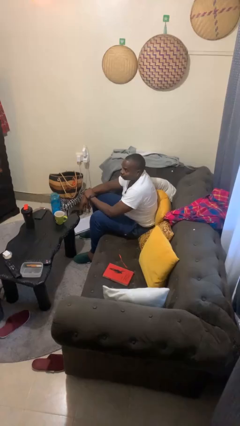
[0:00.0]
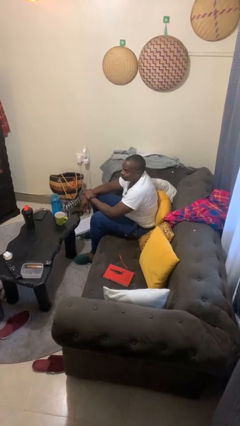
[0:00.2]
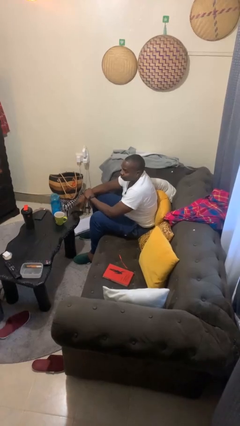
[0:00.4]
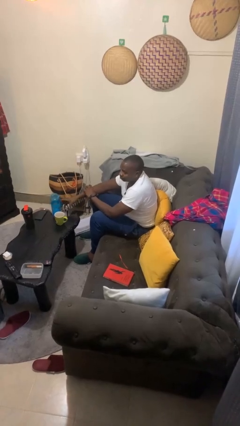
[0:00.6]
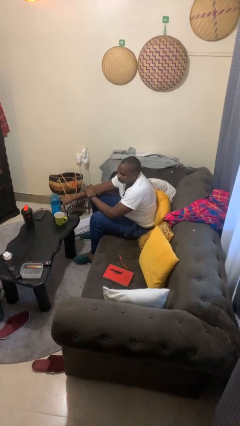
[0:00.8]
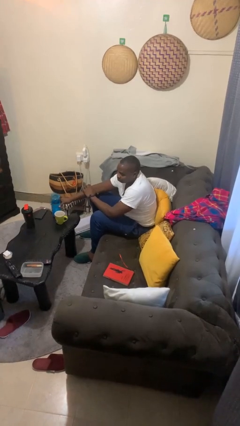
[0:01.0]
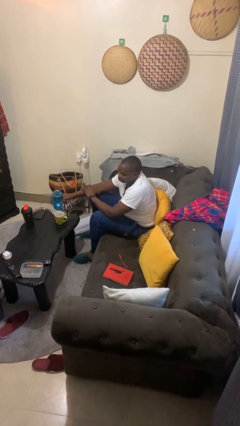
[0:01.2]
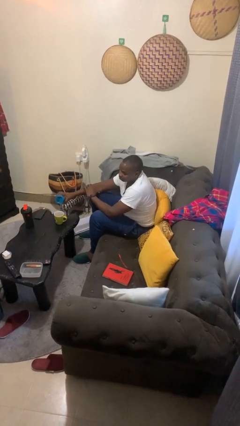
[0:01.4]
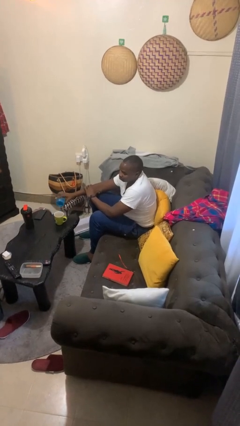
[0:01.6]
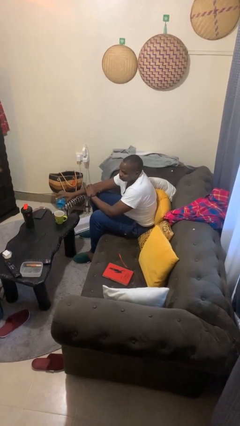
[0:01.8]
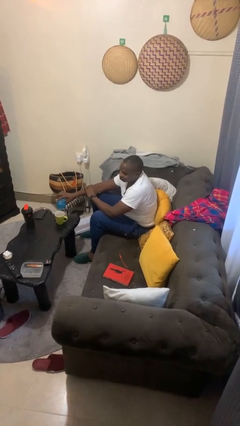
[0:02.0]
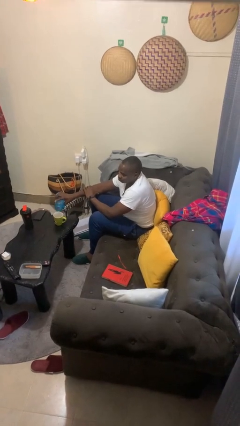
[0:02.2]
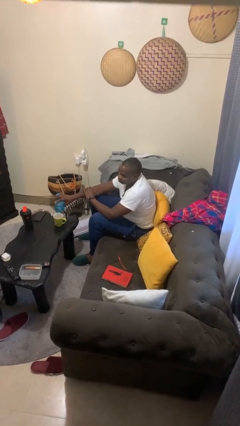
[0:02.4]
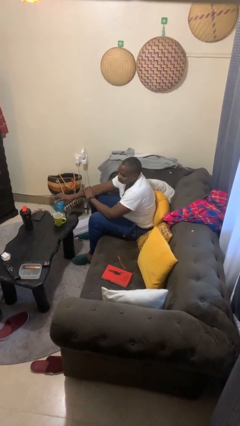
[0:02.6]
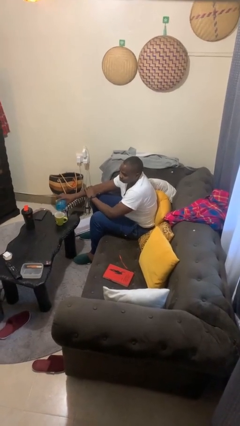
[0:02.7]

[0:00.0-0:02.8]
person pours liquid into cup

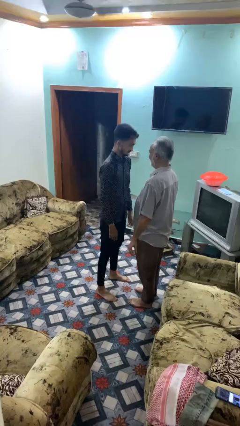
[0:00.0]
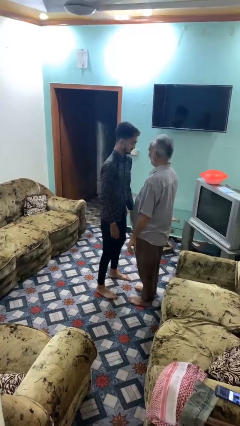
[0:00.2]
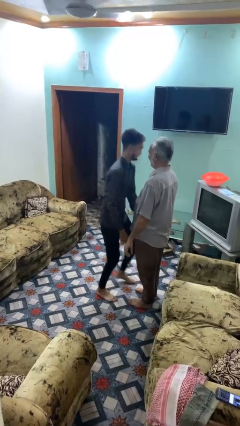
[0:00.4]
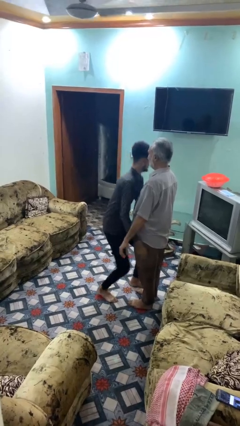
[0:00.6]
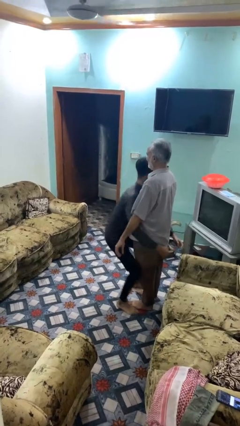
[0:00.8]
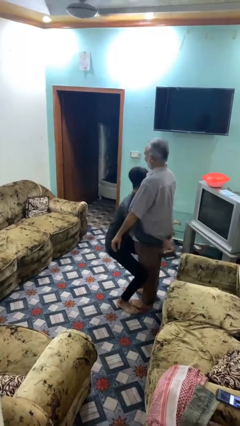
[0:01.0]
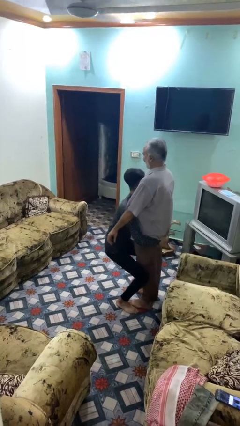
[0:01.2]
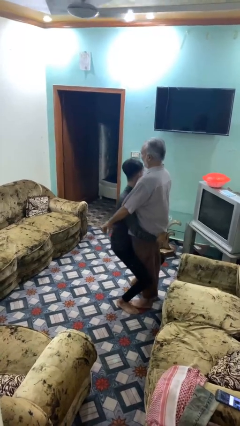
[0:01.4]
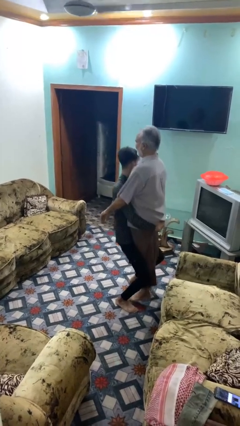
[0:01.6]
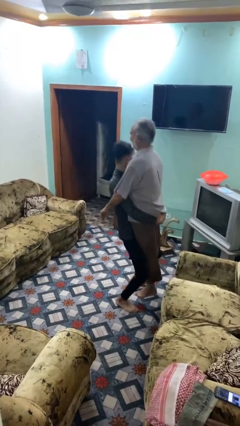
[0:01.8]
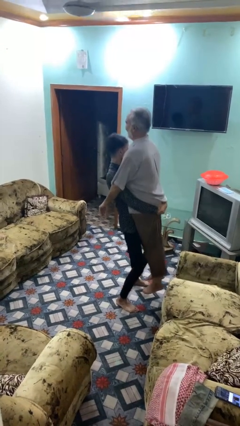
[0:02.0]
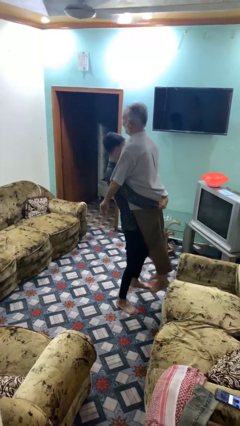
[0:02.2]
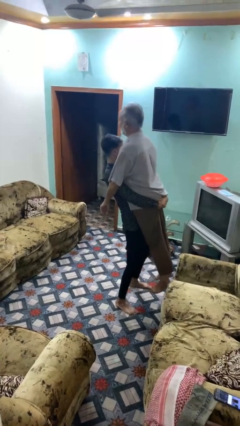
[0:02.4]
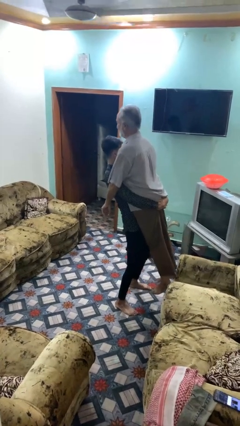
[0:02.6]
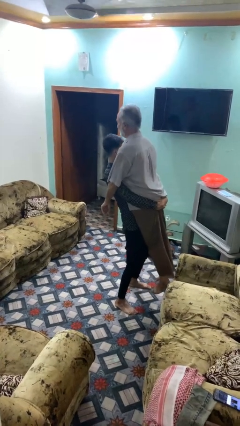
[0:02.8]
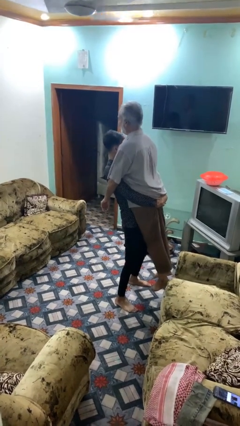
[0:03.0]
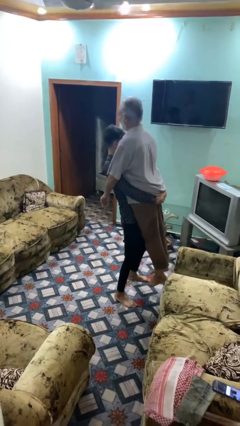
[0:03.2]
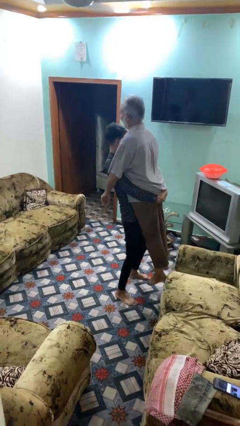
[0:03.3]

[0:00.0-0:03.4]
person picks up person

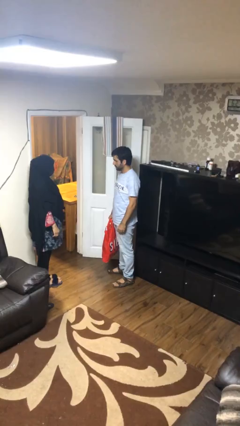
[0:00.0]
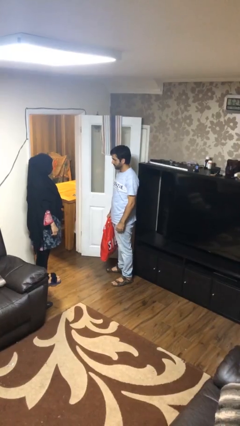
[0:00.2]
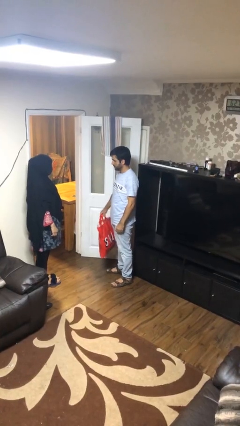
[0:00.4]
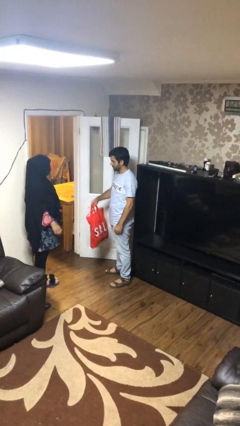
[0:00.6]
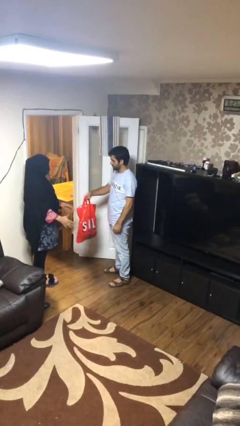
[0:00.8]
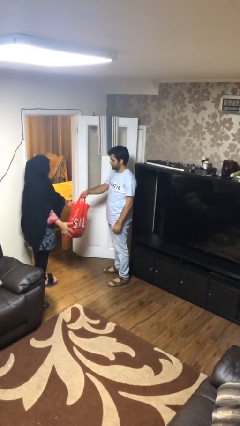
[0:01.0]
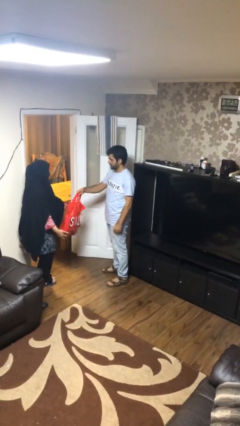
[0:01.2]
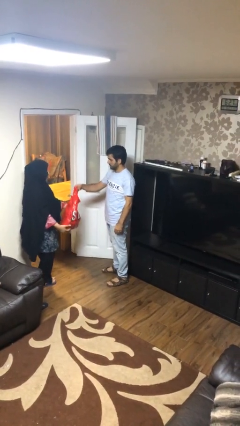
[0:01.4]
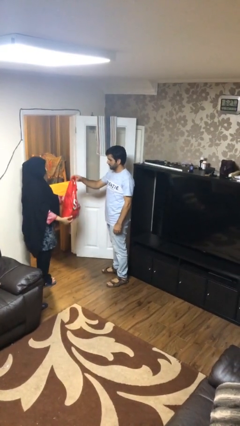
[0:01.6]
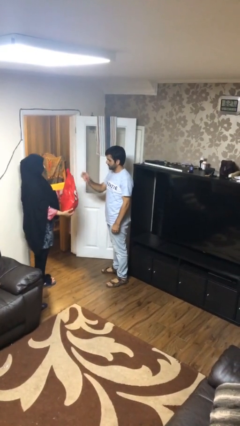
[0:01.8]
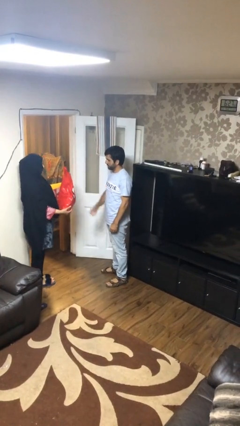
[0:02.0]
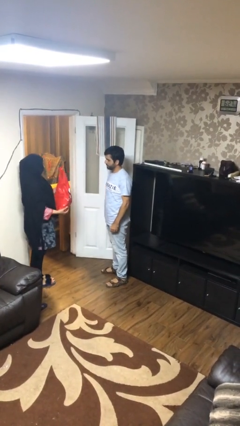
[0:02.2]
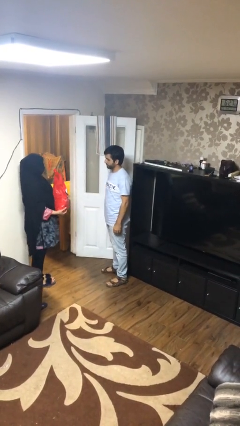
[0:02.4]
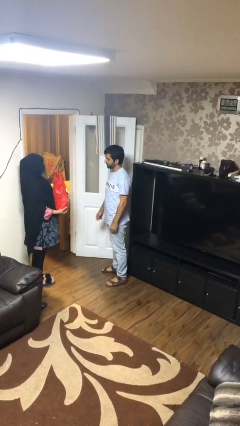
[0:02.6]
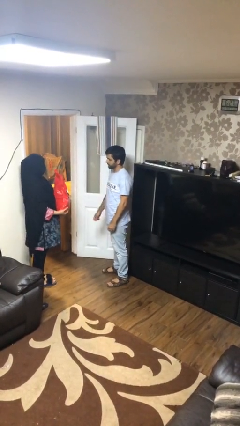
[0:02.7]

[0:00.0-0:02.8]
person transfers object to person

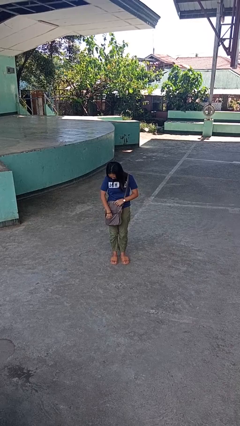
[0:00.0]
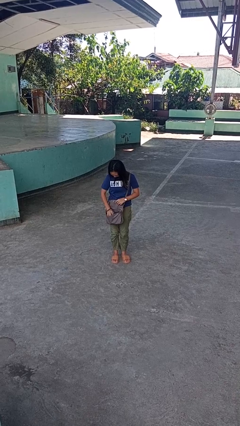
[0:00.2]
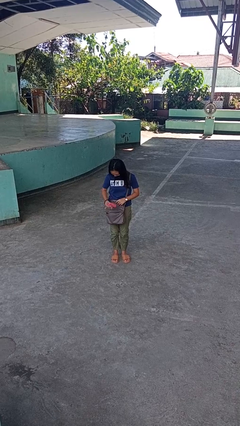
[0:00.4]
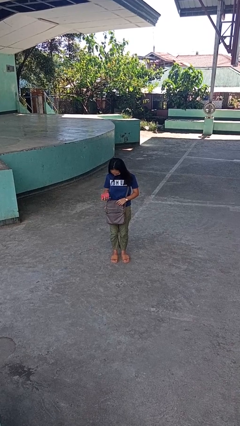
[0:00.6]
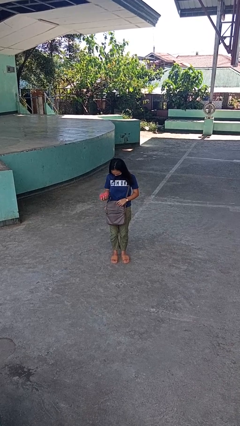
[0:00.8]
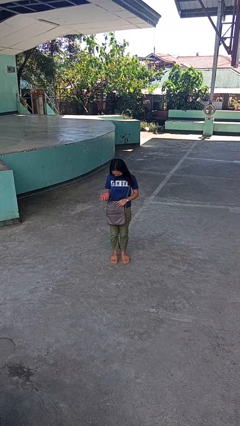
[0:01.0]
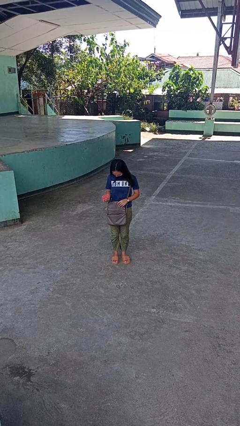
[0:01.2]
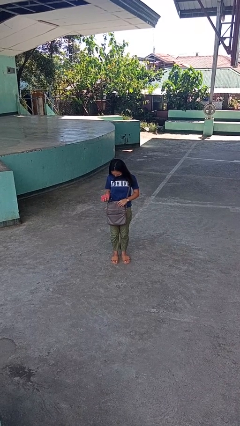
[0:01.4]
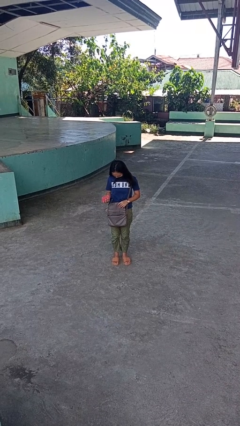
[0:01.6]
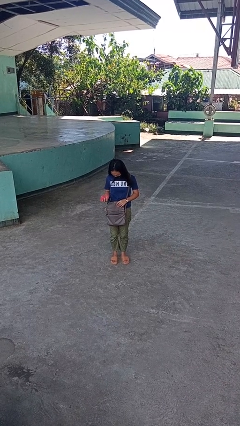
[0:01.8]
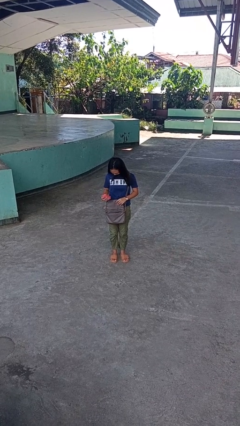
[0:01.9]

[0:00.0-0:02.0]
person takes object from purse

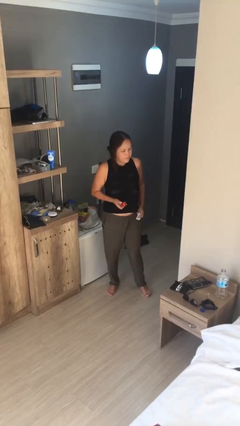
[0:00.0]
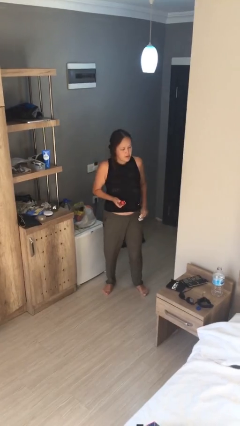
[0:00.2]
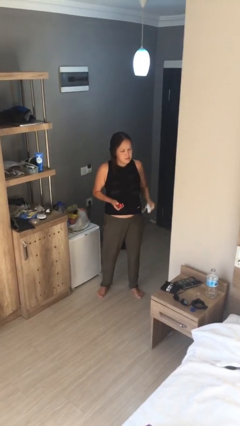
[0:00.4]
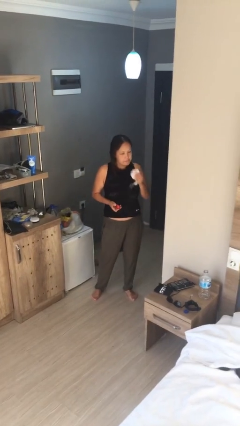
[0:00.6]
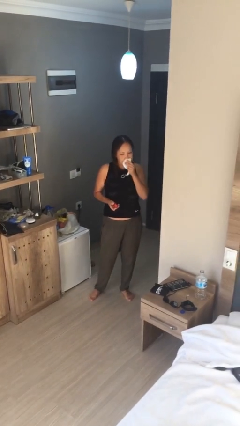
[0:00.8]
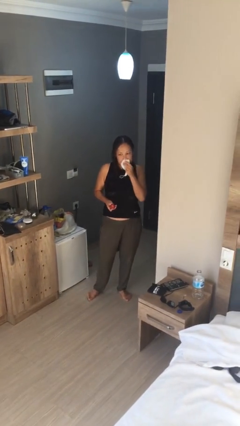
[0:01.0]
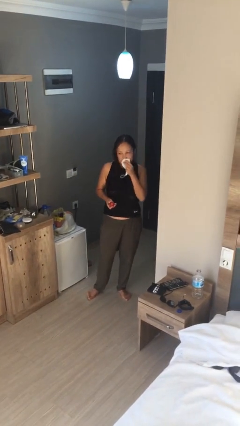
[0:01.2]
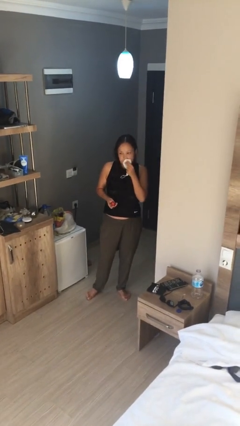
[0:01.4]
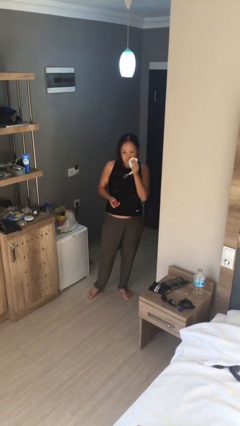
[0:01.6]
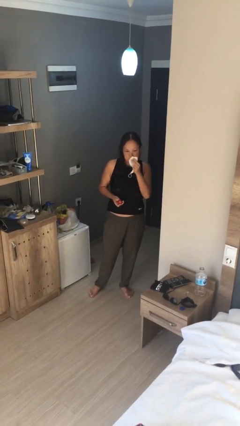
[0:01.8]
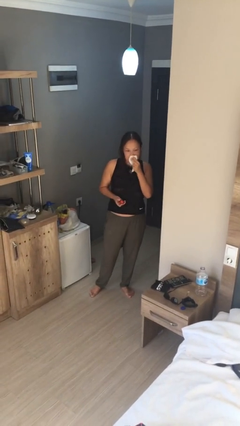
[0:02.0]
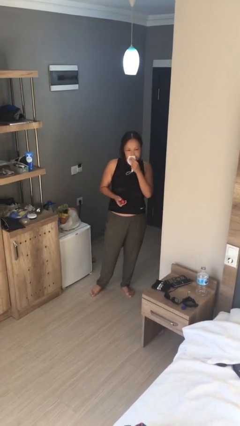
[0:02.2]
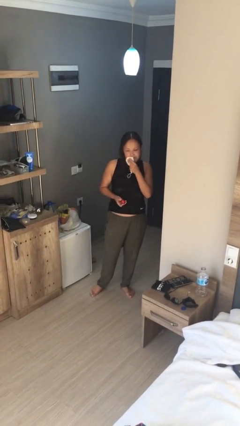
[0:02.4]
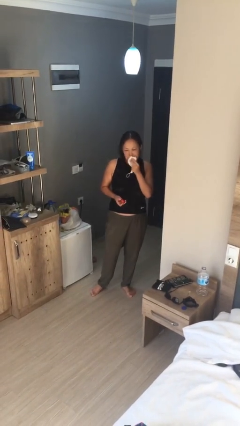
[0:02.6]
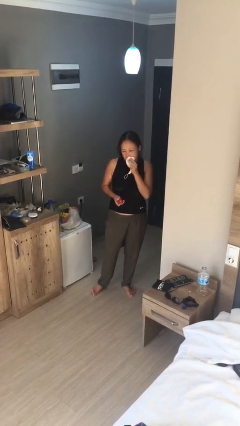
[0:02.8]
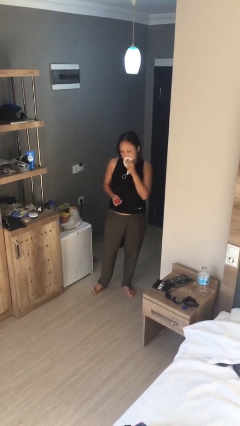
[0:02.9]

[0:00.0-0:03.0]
person wipes mouth with napkin

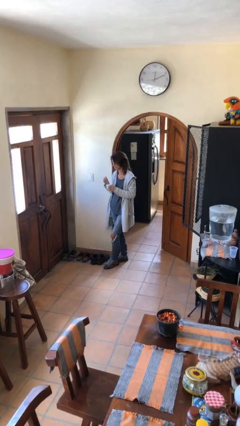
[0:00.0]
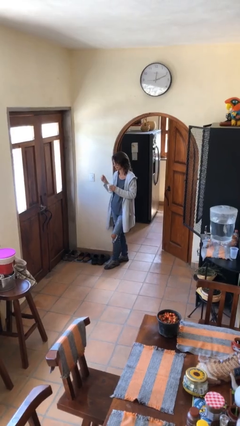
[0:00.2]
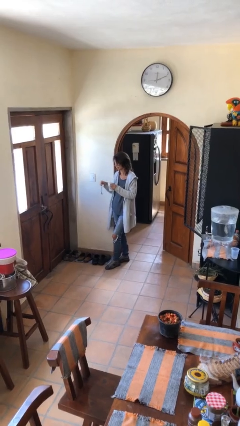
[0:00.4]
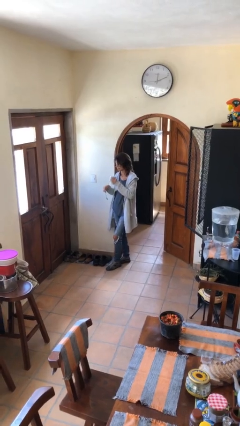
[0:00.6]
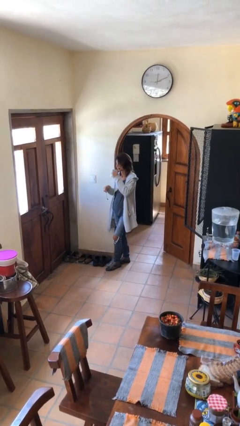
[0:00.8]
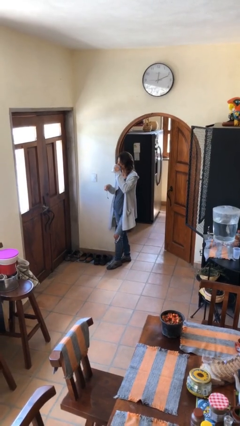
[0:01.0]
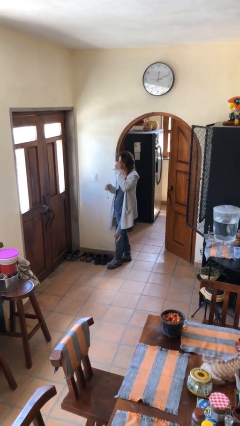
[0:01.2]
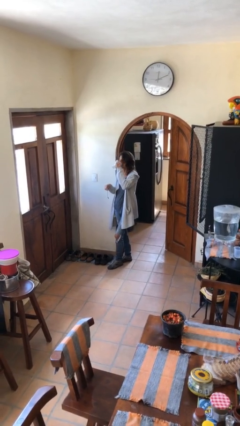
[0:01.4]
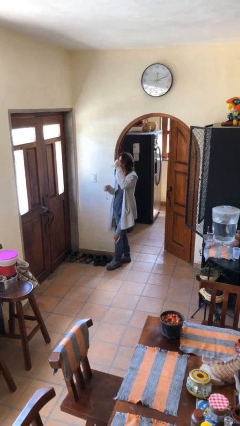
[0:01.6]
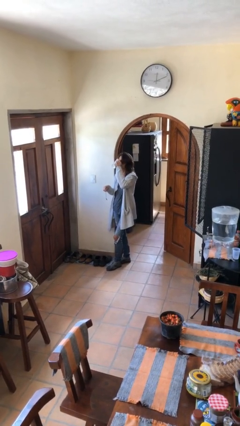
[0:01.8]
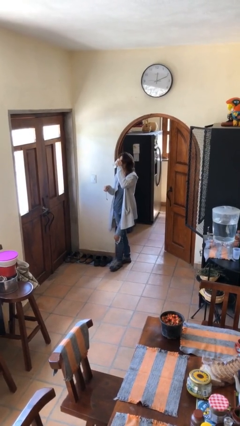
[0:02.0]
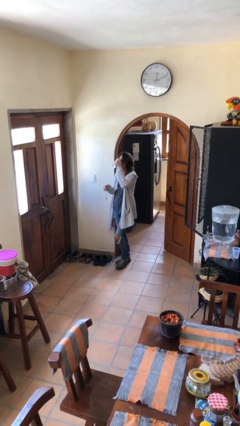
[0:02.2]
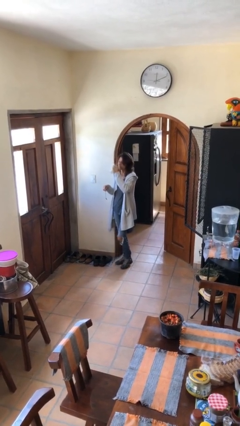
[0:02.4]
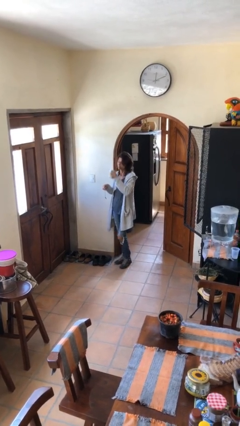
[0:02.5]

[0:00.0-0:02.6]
person drinks from mug

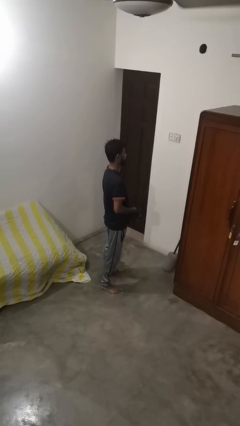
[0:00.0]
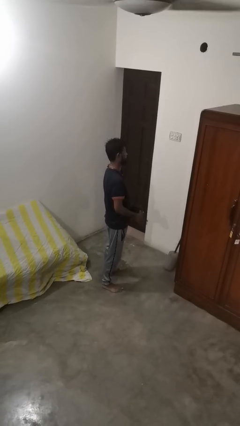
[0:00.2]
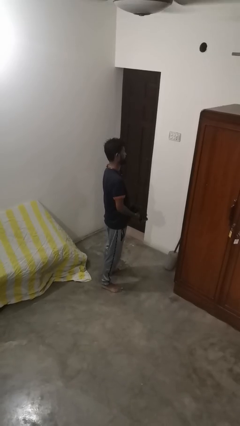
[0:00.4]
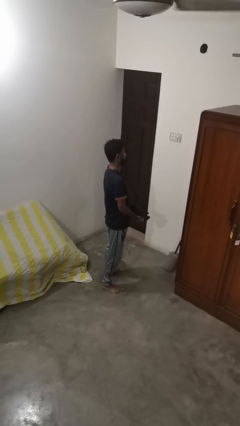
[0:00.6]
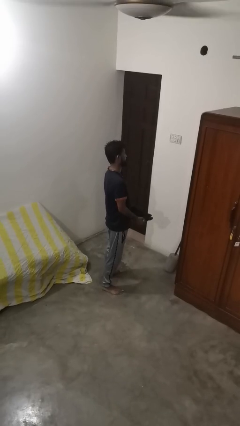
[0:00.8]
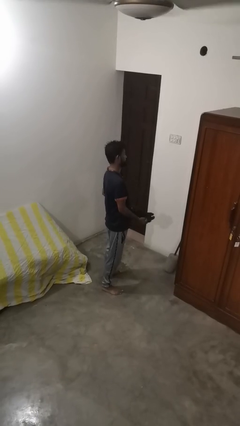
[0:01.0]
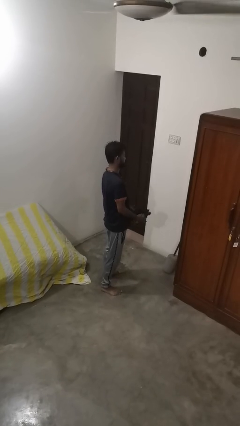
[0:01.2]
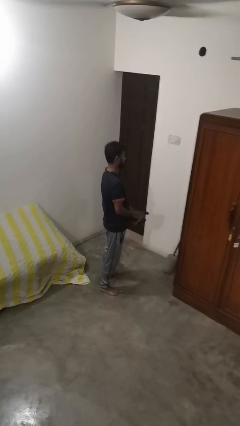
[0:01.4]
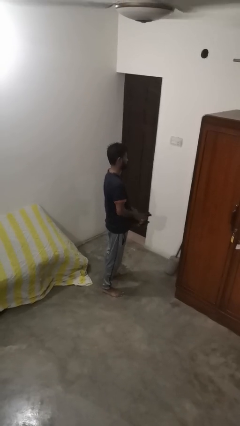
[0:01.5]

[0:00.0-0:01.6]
person takes off gloves
